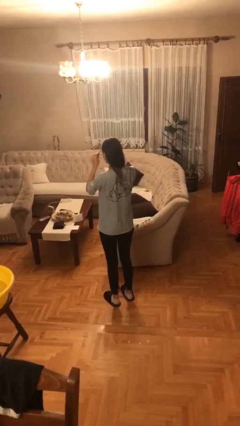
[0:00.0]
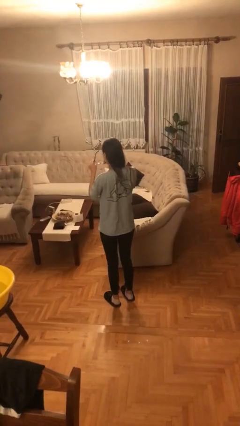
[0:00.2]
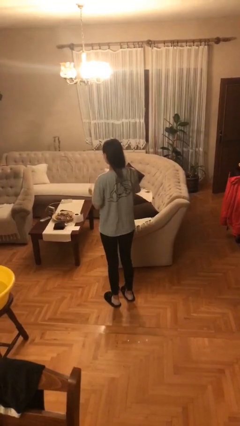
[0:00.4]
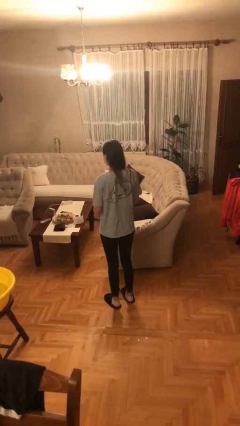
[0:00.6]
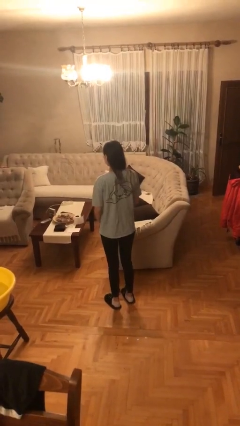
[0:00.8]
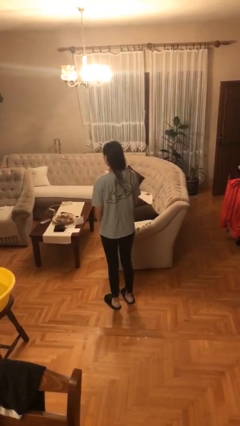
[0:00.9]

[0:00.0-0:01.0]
person takes off glasses

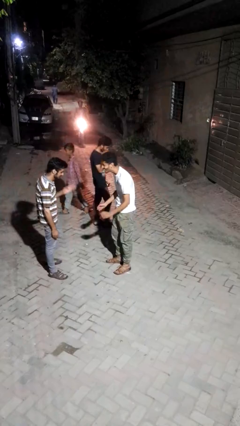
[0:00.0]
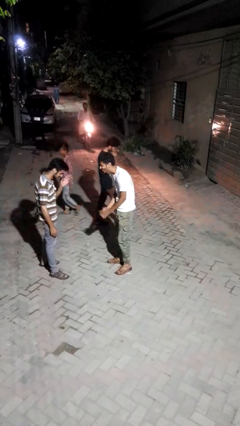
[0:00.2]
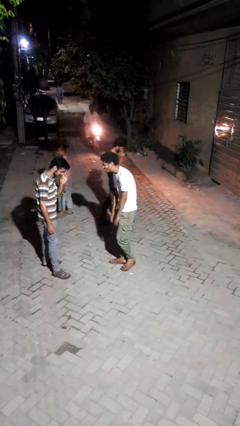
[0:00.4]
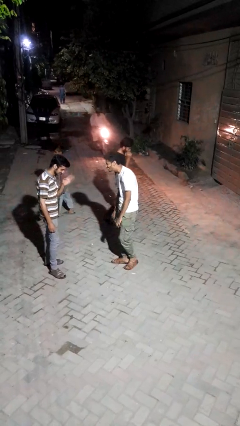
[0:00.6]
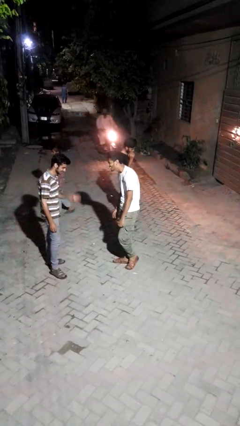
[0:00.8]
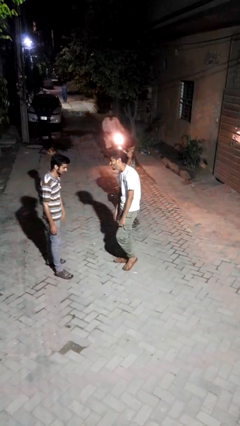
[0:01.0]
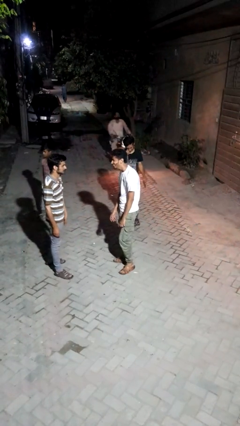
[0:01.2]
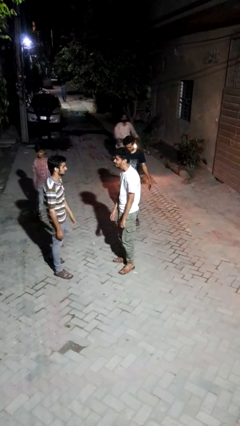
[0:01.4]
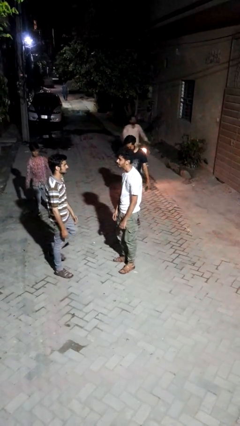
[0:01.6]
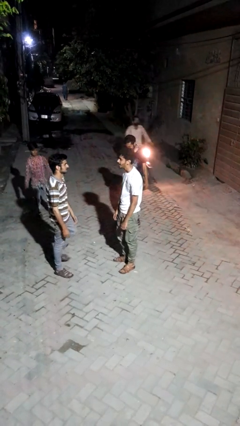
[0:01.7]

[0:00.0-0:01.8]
person laughs with person

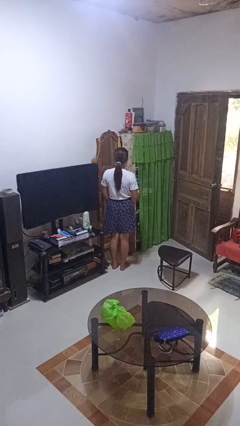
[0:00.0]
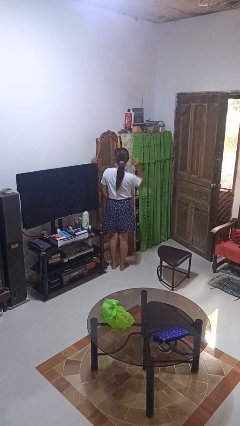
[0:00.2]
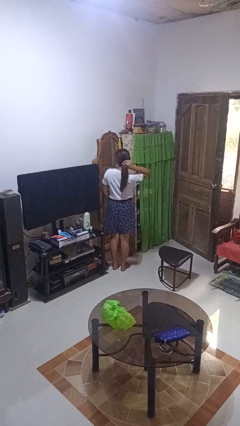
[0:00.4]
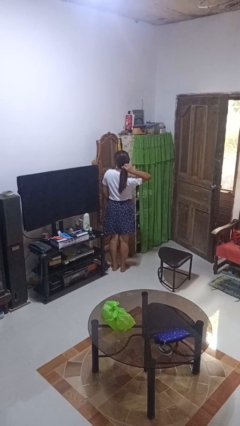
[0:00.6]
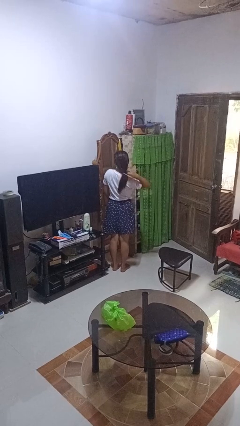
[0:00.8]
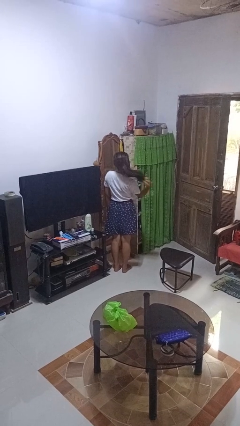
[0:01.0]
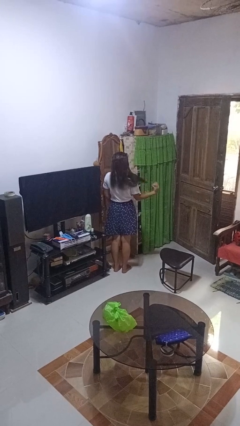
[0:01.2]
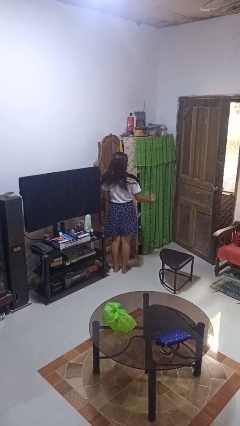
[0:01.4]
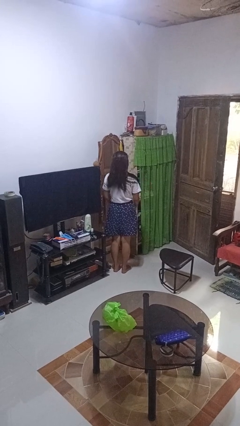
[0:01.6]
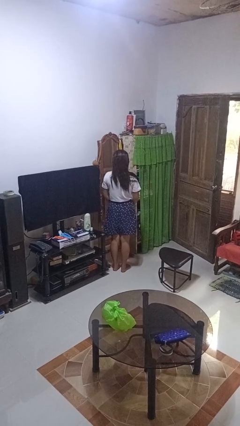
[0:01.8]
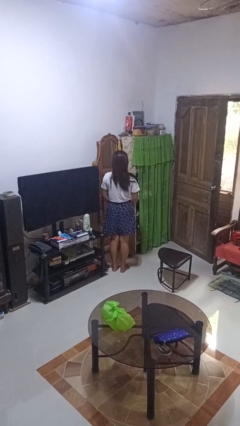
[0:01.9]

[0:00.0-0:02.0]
person takes off hairtie

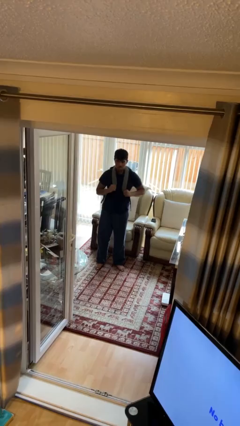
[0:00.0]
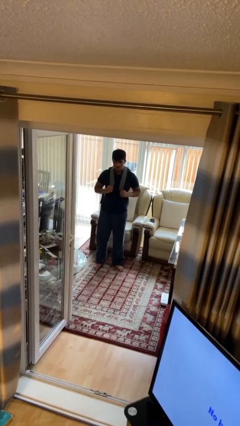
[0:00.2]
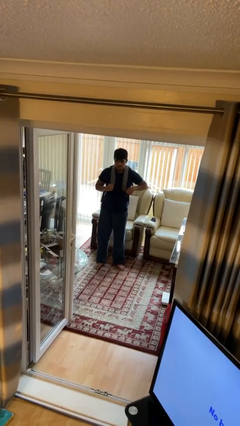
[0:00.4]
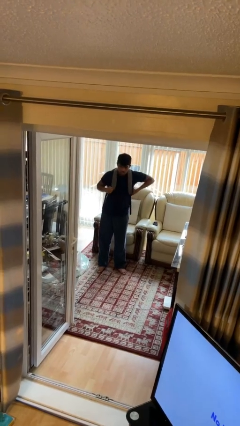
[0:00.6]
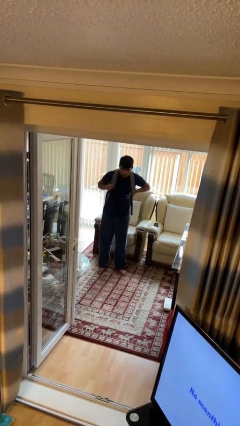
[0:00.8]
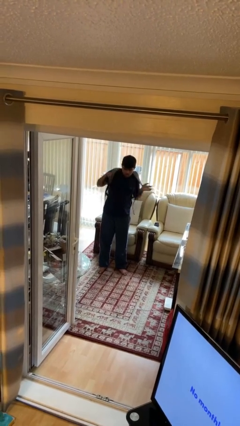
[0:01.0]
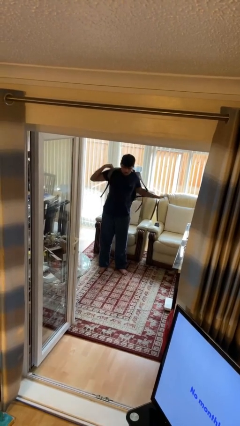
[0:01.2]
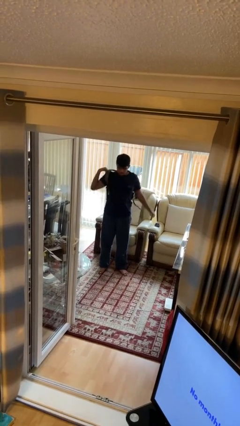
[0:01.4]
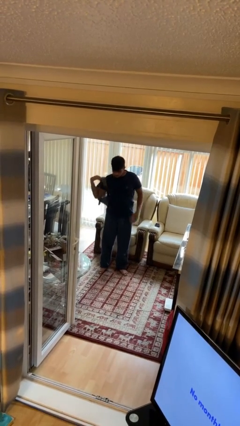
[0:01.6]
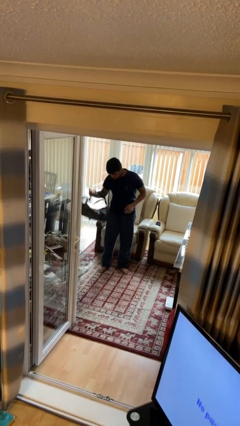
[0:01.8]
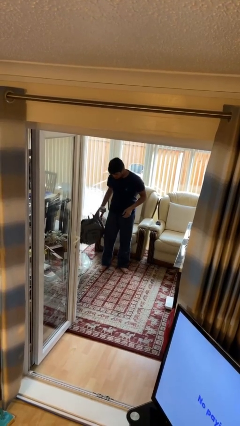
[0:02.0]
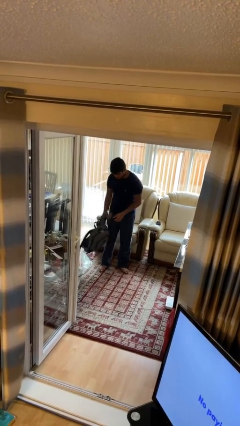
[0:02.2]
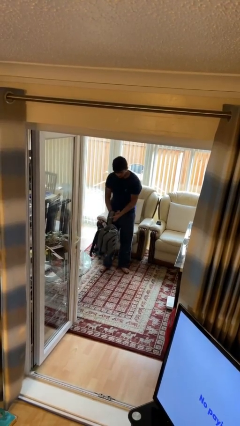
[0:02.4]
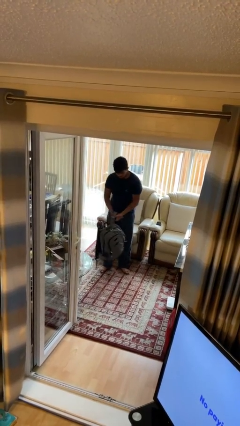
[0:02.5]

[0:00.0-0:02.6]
person takes off backpack

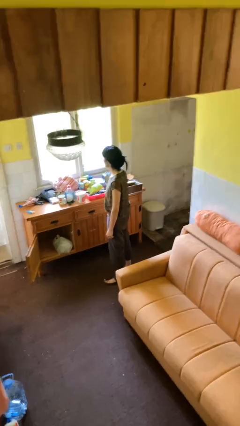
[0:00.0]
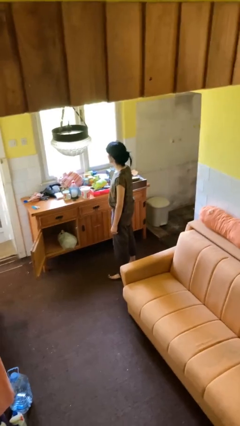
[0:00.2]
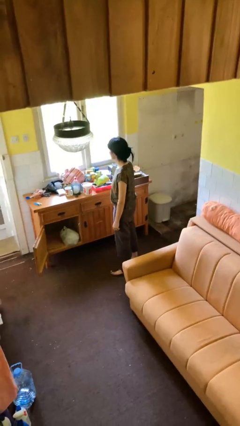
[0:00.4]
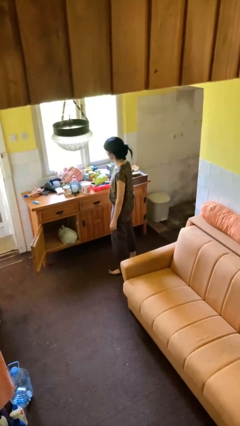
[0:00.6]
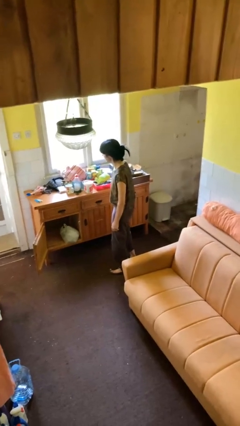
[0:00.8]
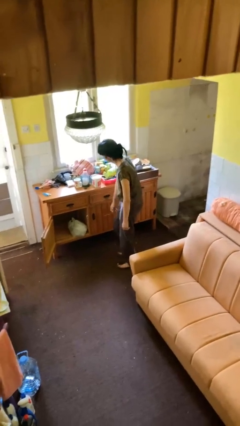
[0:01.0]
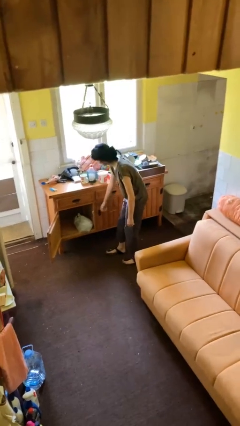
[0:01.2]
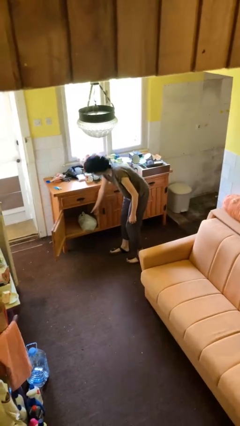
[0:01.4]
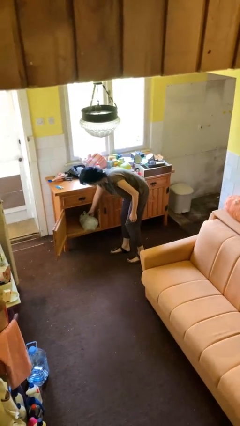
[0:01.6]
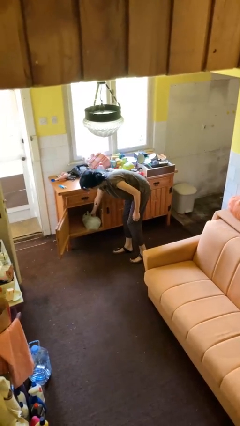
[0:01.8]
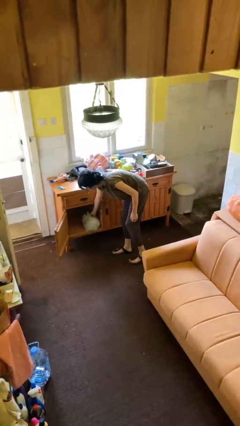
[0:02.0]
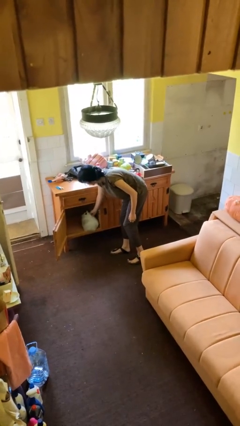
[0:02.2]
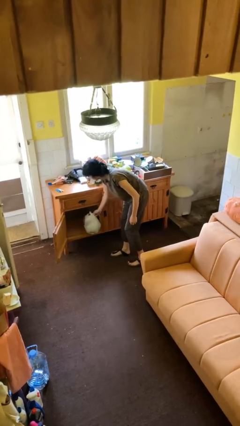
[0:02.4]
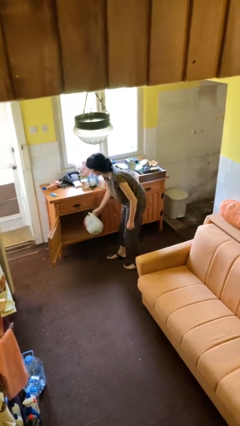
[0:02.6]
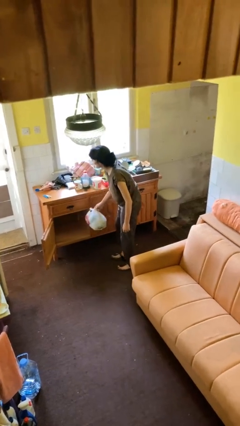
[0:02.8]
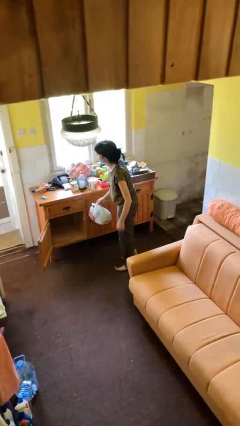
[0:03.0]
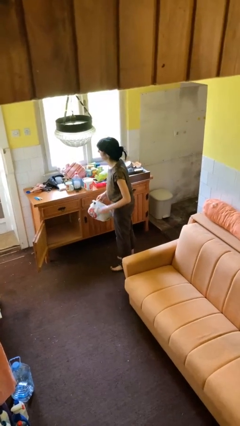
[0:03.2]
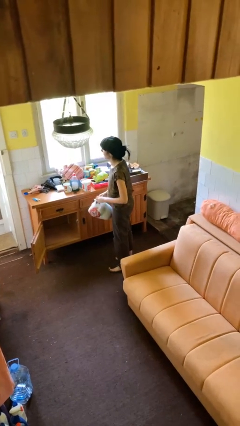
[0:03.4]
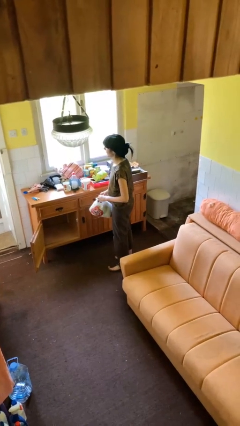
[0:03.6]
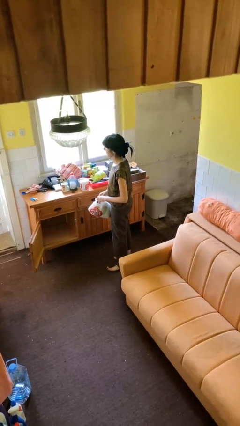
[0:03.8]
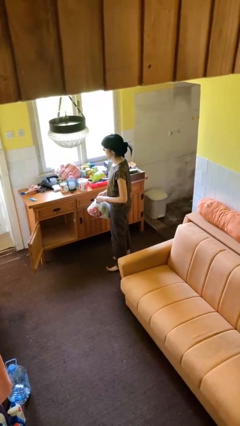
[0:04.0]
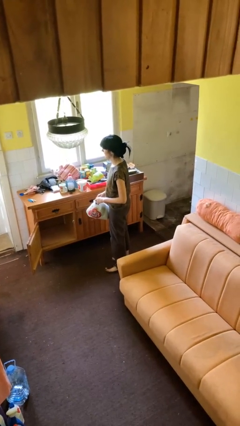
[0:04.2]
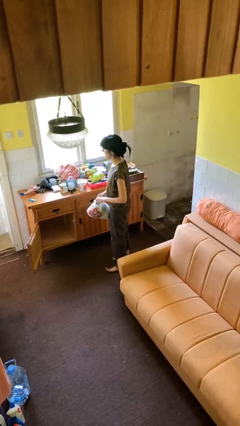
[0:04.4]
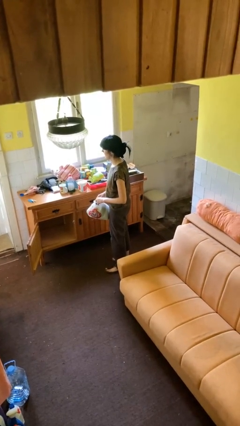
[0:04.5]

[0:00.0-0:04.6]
person picks up object from cabinet

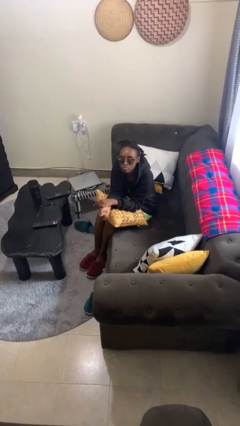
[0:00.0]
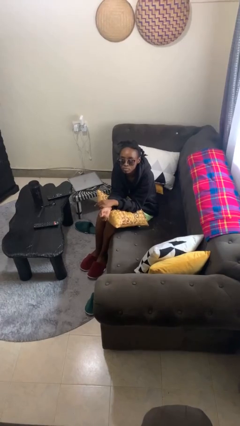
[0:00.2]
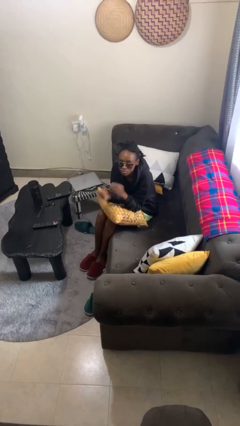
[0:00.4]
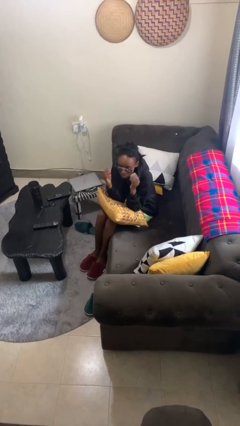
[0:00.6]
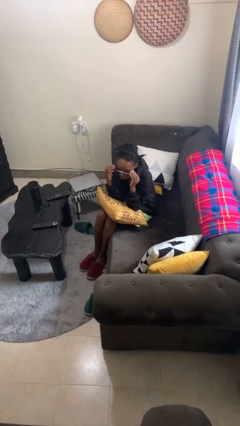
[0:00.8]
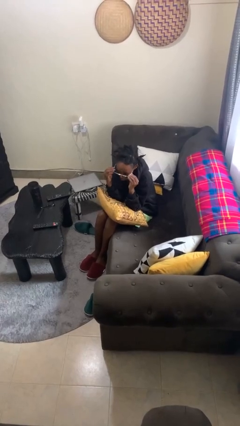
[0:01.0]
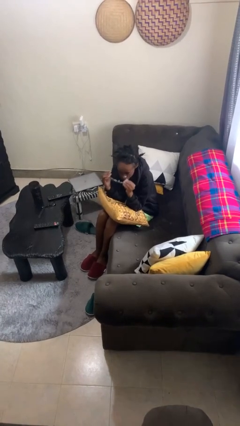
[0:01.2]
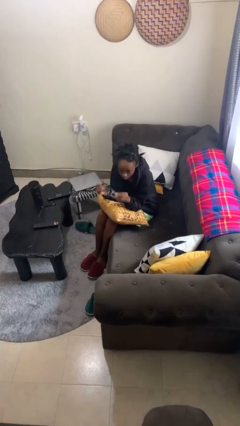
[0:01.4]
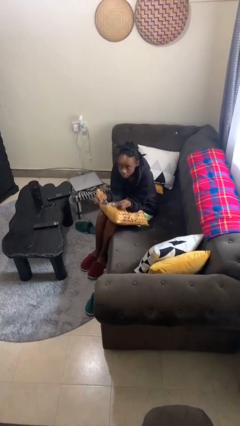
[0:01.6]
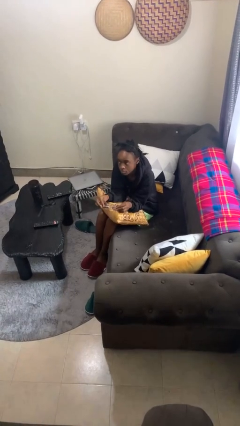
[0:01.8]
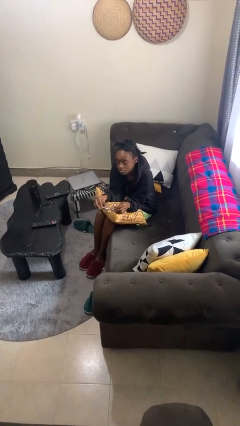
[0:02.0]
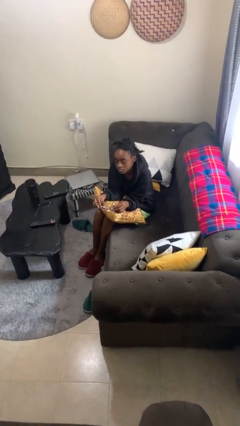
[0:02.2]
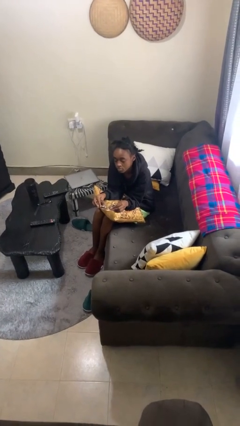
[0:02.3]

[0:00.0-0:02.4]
person takes off sunglasses

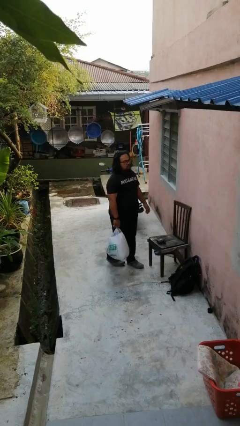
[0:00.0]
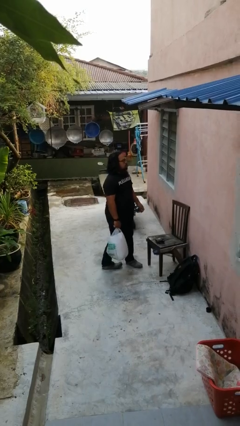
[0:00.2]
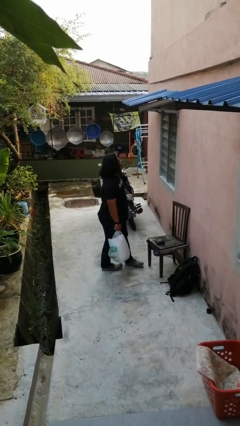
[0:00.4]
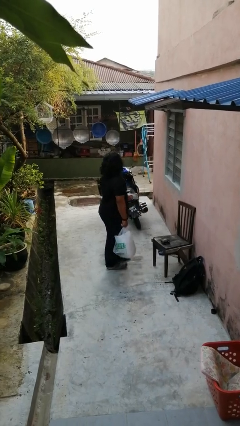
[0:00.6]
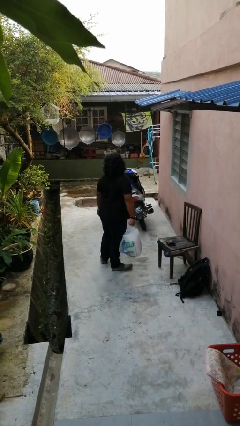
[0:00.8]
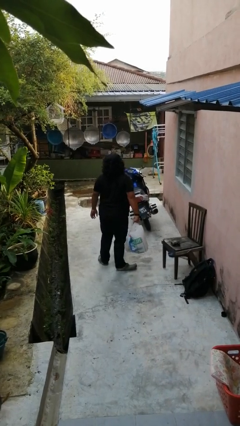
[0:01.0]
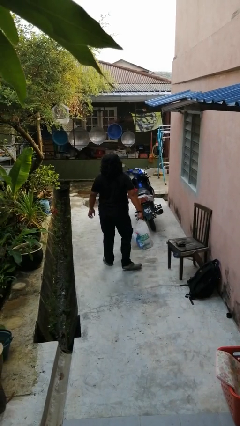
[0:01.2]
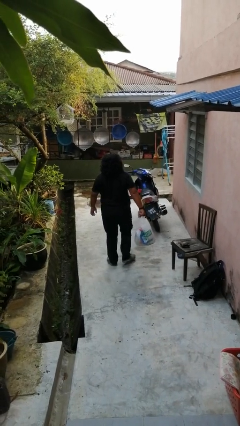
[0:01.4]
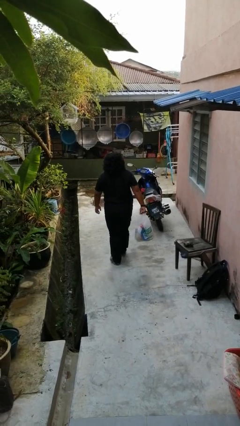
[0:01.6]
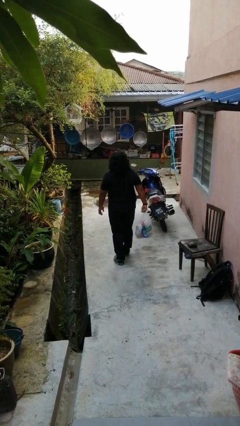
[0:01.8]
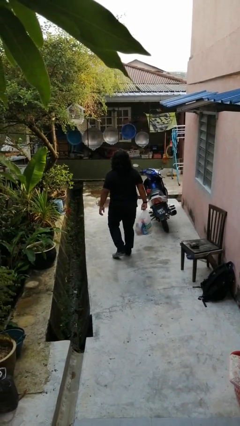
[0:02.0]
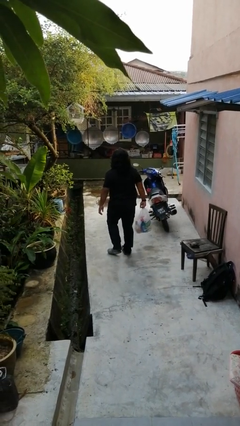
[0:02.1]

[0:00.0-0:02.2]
person carries groceries
